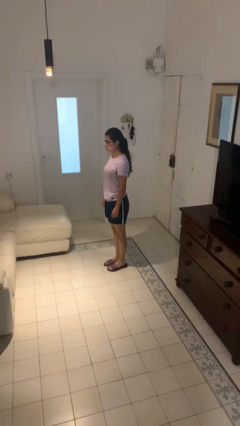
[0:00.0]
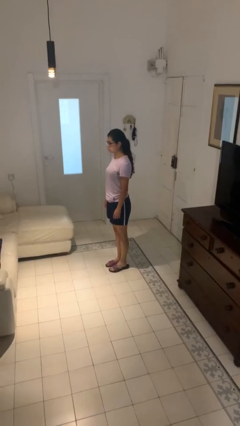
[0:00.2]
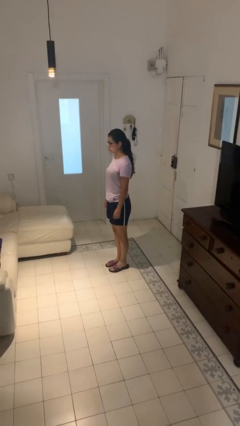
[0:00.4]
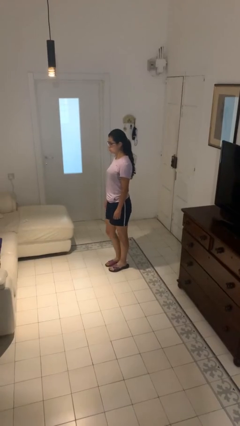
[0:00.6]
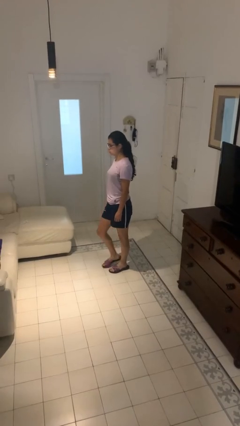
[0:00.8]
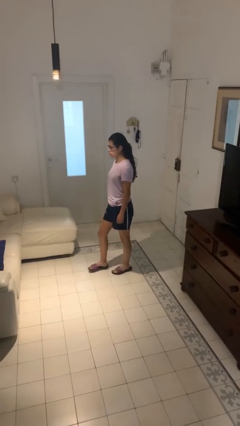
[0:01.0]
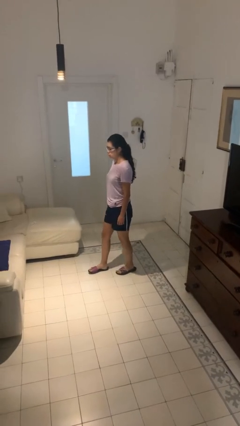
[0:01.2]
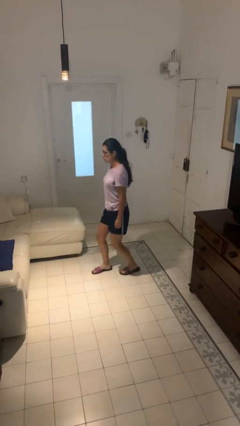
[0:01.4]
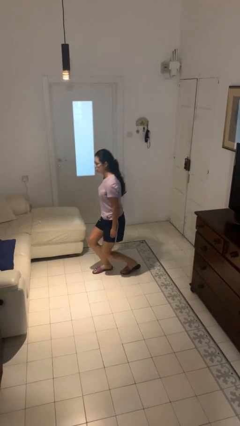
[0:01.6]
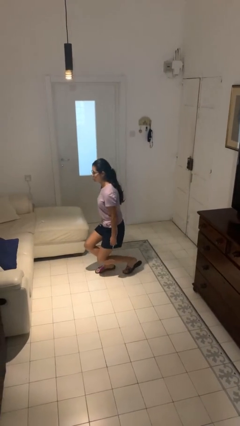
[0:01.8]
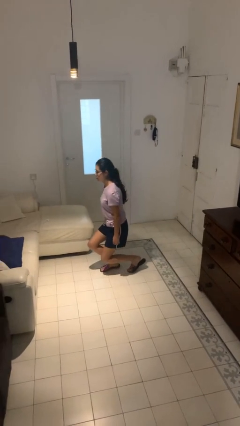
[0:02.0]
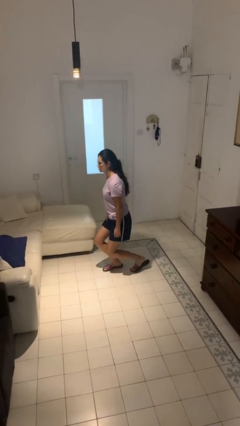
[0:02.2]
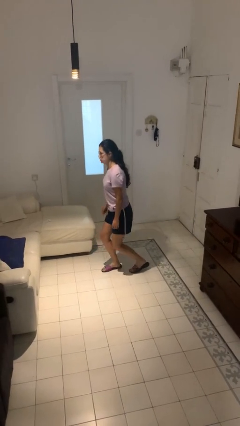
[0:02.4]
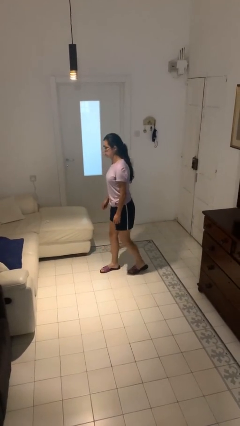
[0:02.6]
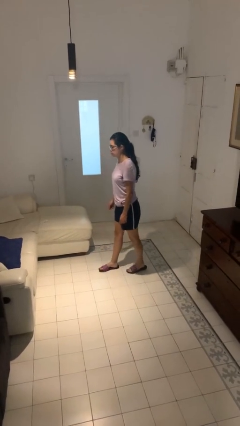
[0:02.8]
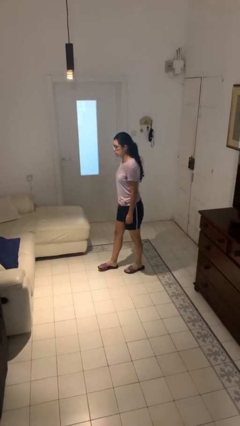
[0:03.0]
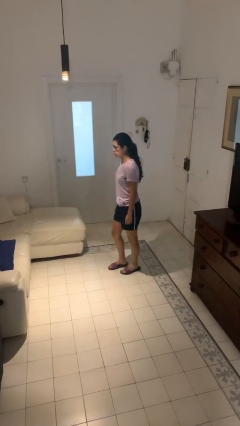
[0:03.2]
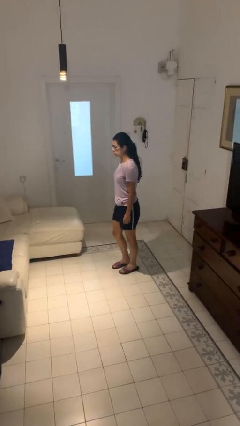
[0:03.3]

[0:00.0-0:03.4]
person exercises with lunges

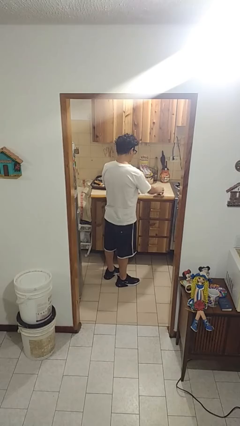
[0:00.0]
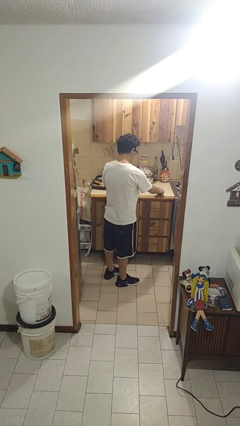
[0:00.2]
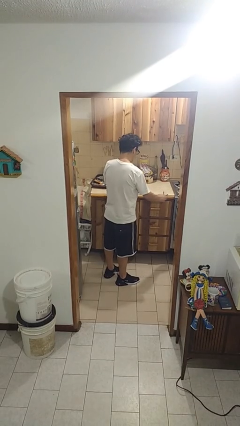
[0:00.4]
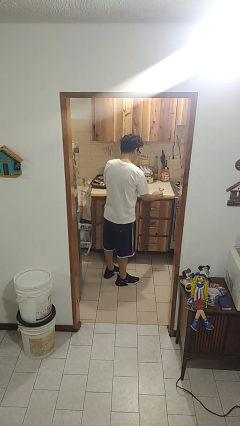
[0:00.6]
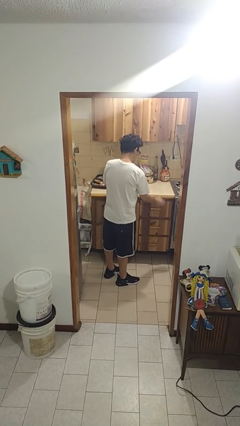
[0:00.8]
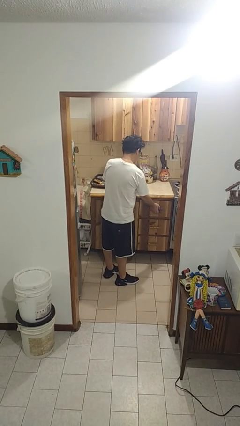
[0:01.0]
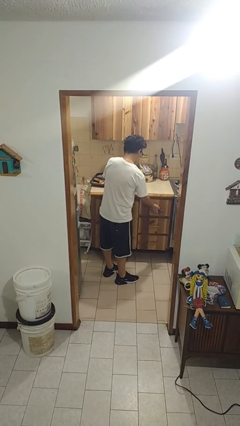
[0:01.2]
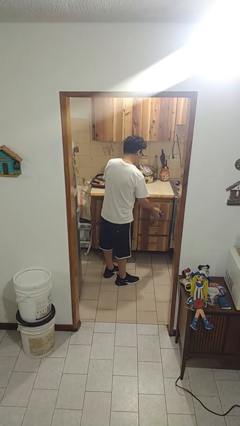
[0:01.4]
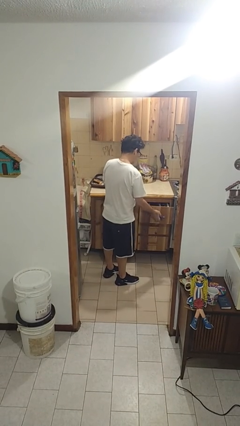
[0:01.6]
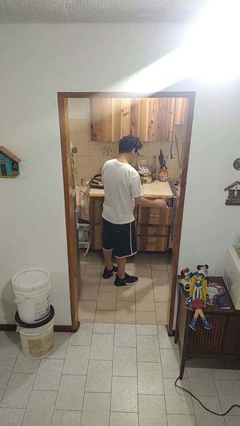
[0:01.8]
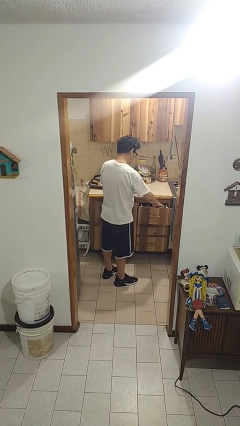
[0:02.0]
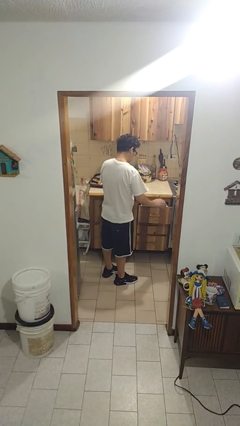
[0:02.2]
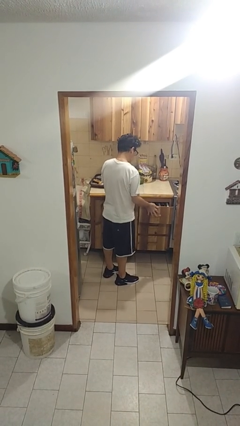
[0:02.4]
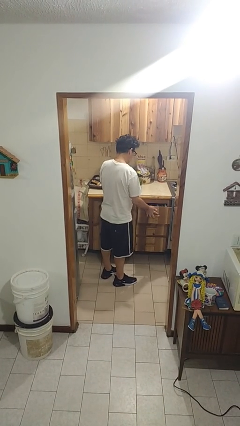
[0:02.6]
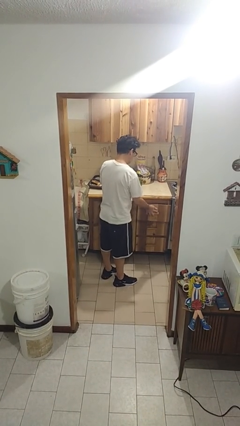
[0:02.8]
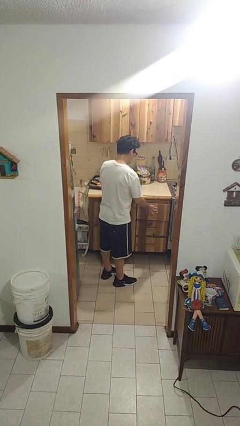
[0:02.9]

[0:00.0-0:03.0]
person puts object into kitchen drawer

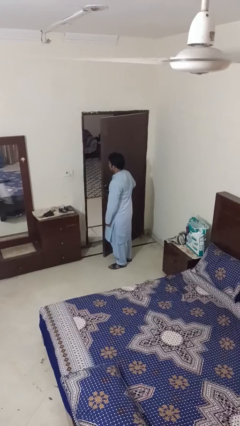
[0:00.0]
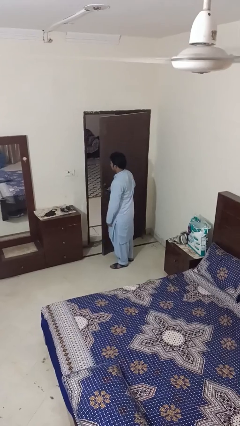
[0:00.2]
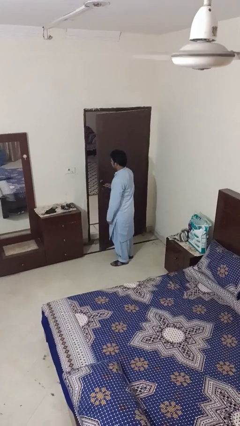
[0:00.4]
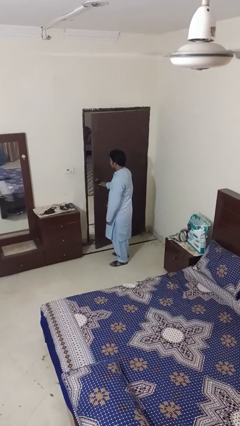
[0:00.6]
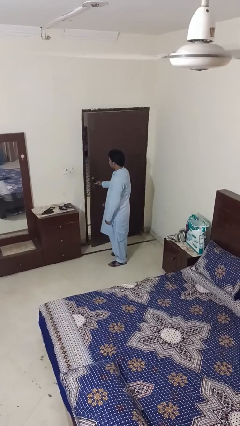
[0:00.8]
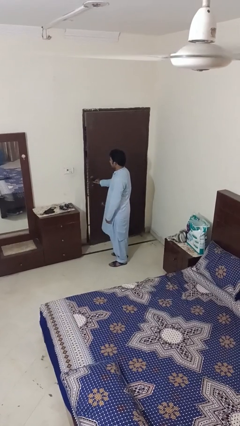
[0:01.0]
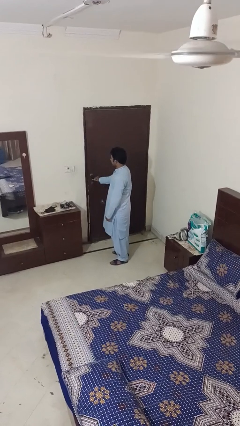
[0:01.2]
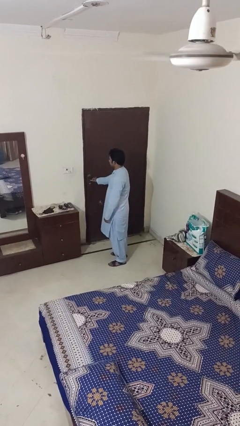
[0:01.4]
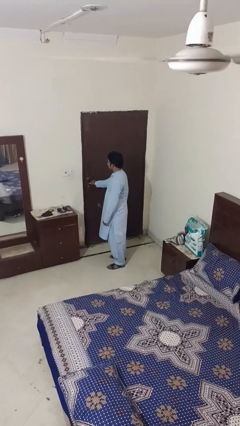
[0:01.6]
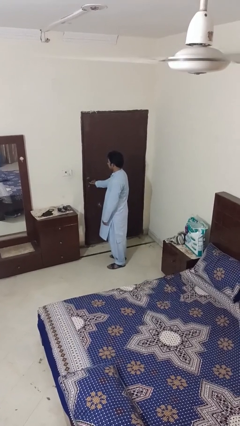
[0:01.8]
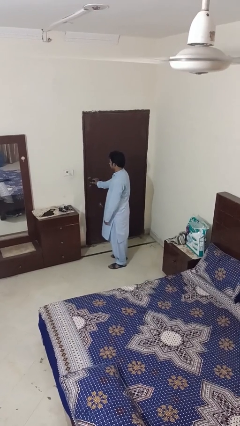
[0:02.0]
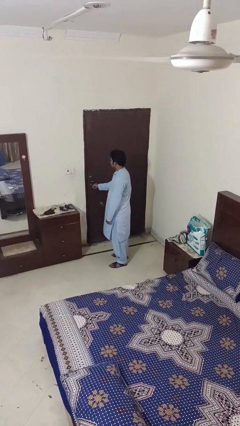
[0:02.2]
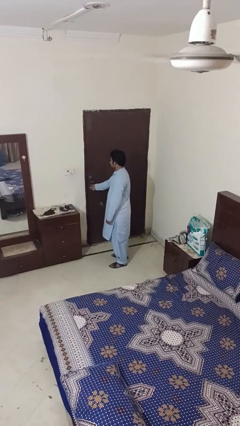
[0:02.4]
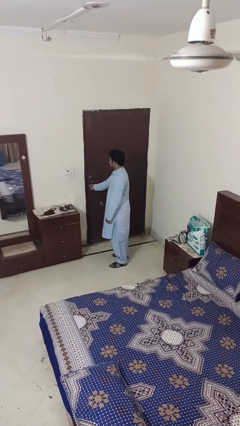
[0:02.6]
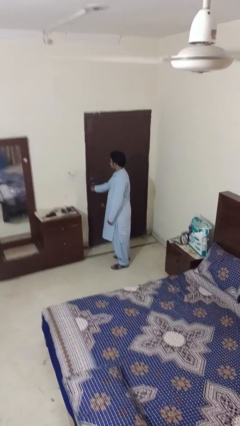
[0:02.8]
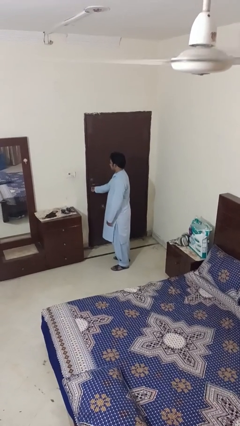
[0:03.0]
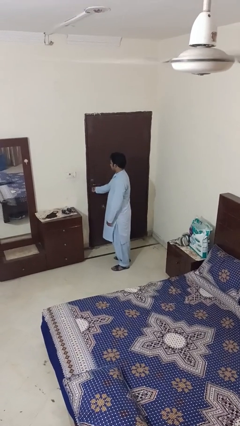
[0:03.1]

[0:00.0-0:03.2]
person closes facility door

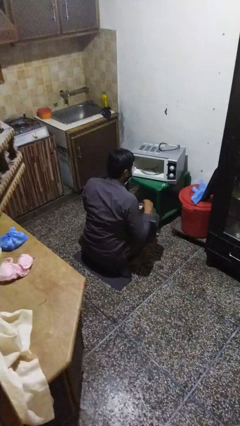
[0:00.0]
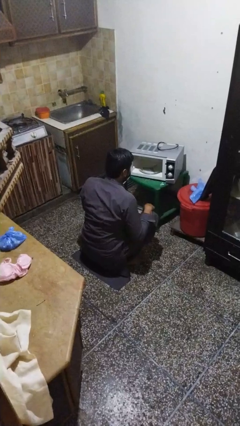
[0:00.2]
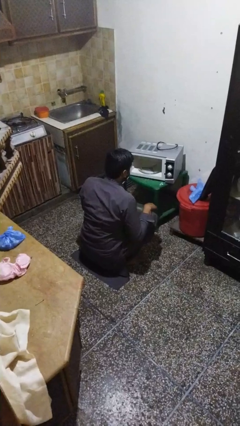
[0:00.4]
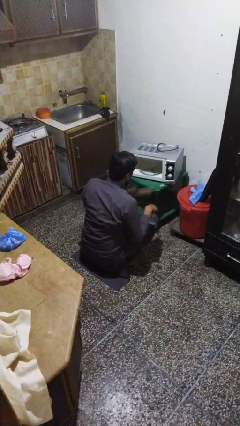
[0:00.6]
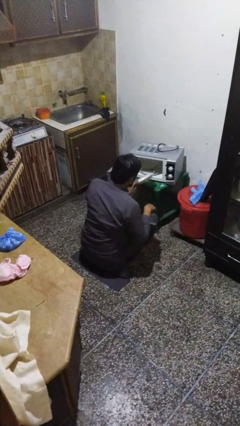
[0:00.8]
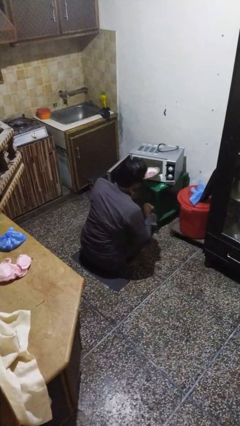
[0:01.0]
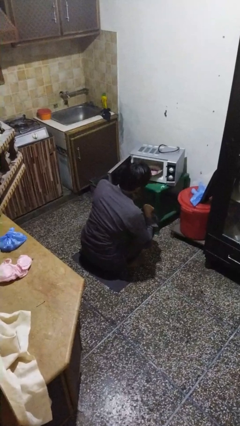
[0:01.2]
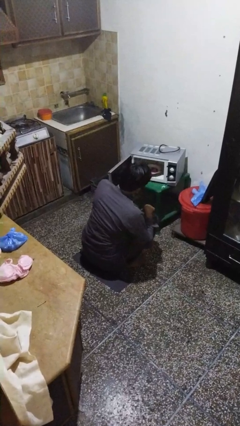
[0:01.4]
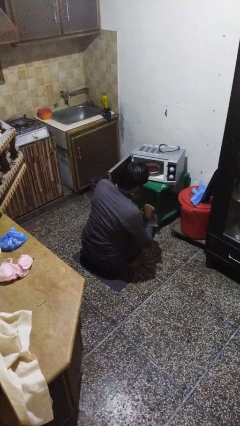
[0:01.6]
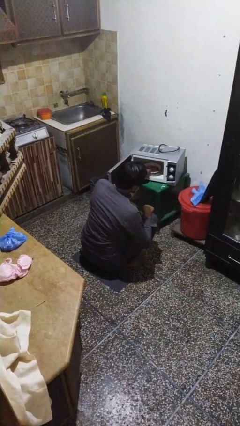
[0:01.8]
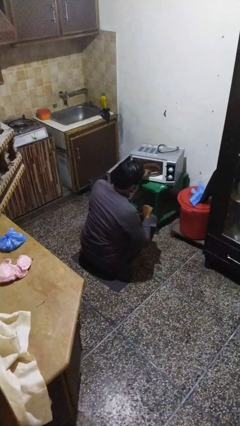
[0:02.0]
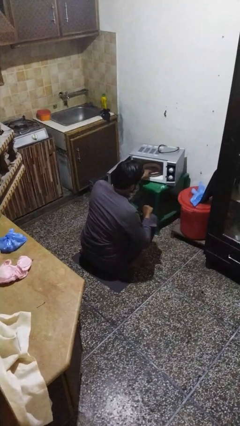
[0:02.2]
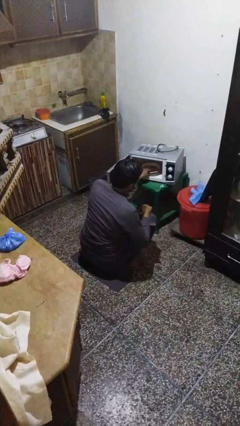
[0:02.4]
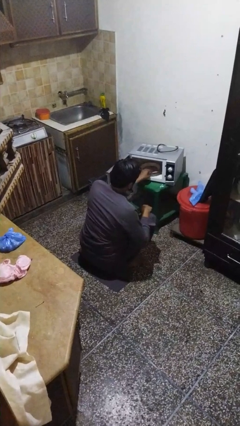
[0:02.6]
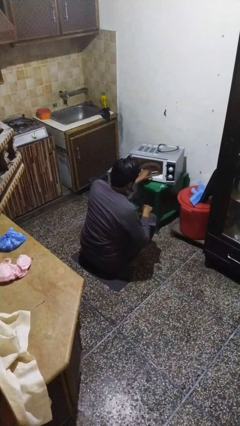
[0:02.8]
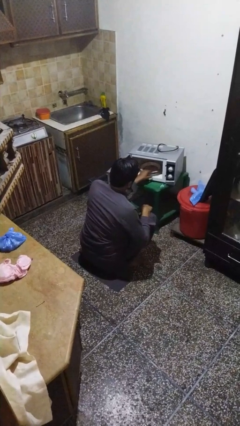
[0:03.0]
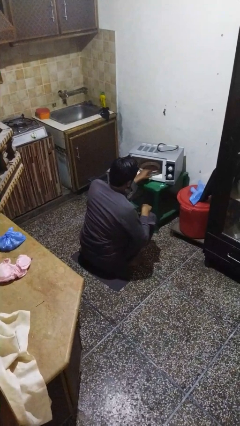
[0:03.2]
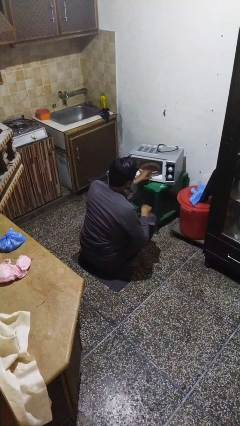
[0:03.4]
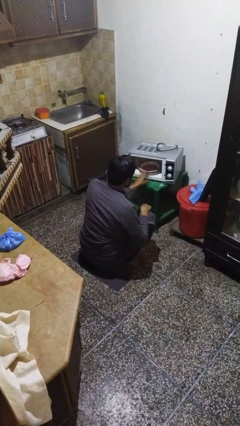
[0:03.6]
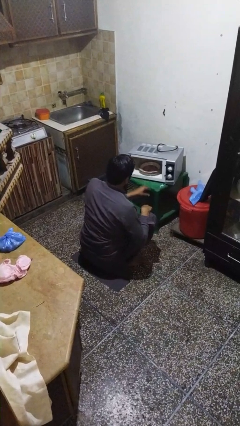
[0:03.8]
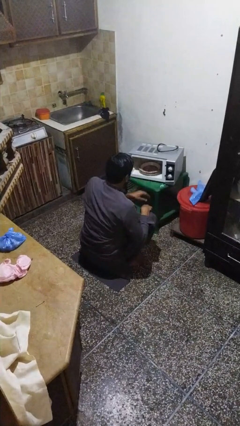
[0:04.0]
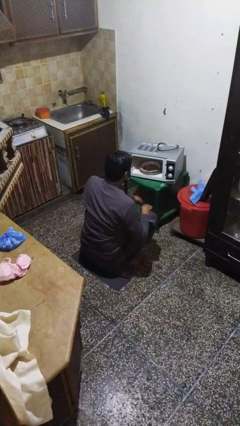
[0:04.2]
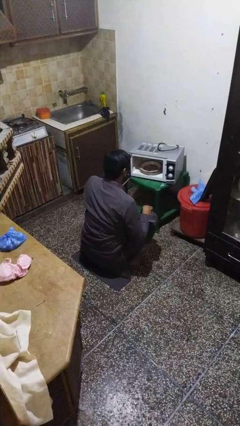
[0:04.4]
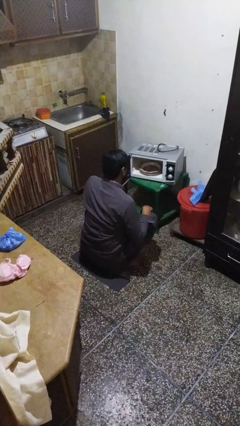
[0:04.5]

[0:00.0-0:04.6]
person puts object into microwave

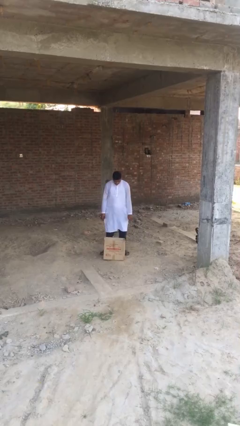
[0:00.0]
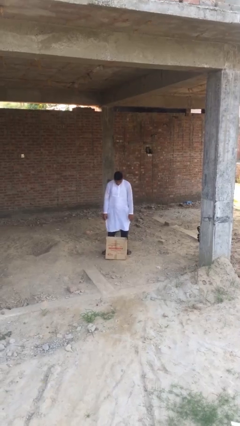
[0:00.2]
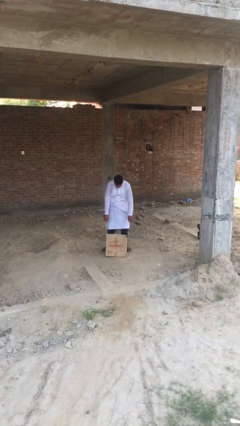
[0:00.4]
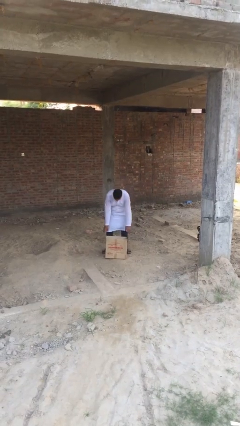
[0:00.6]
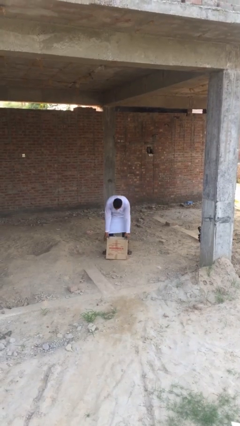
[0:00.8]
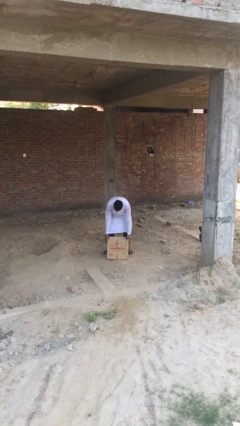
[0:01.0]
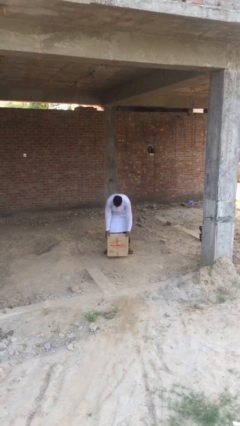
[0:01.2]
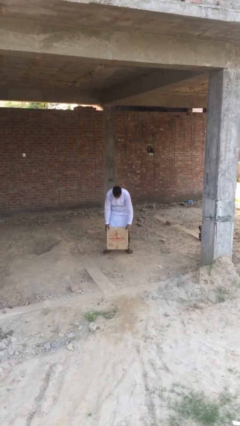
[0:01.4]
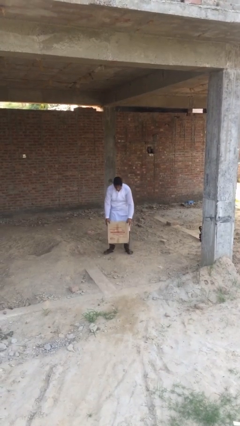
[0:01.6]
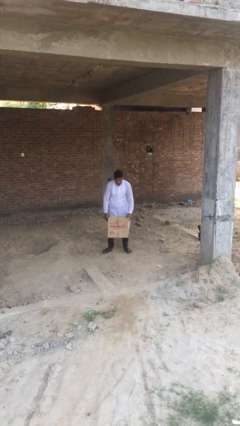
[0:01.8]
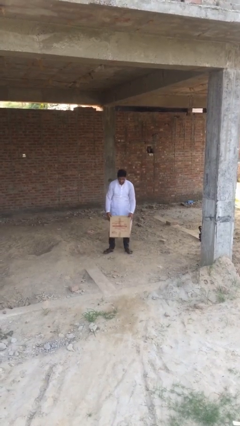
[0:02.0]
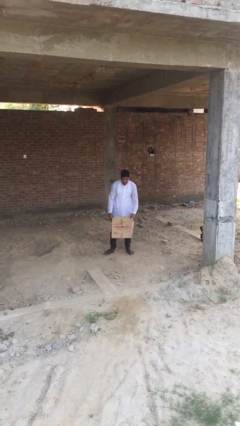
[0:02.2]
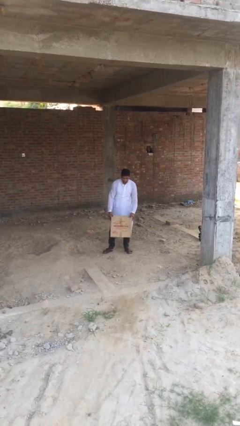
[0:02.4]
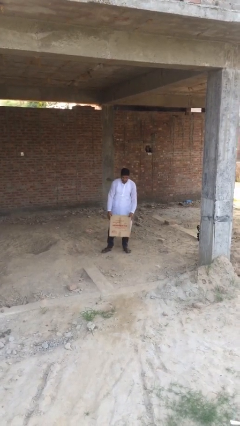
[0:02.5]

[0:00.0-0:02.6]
person picks up object from floor

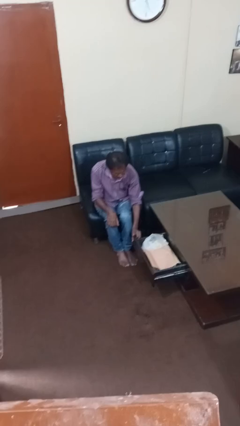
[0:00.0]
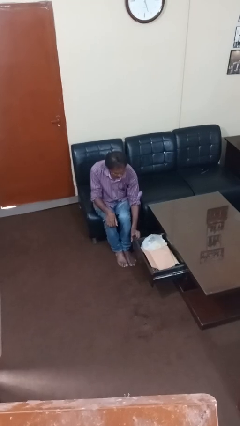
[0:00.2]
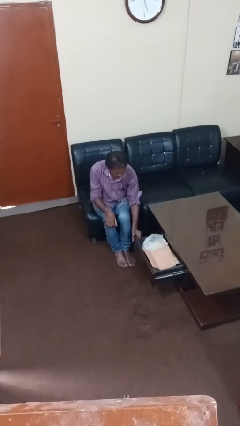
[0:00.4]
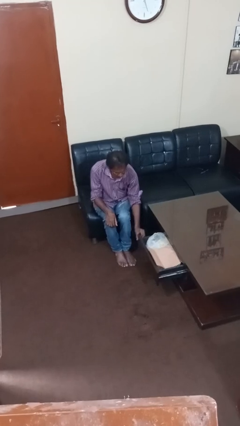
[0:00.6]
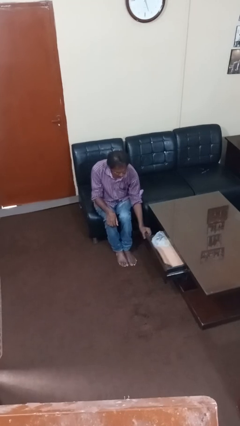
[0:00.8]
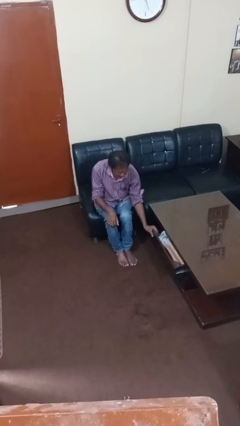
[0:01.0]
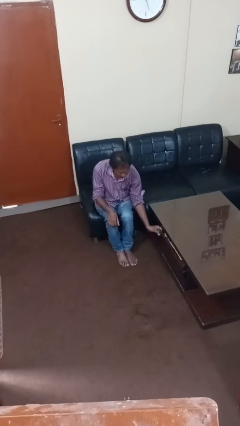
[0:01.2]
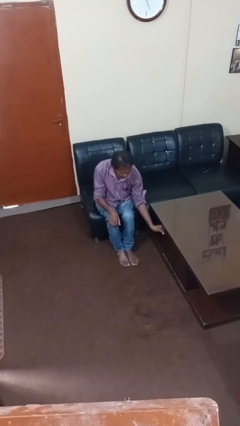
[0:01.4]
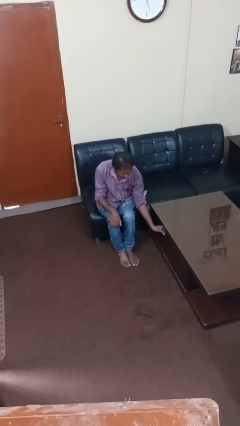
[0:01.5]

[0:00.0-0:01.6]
person closes dresser drawer
